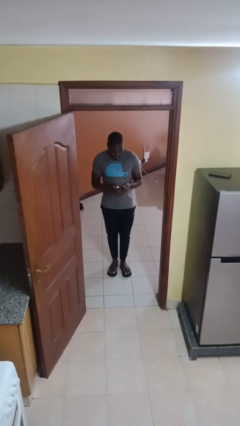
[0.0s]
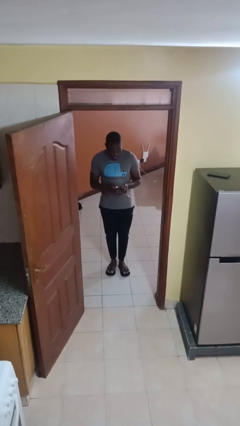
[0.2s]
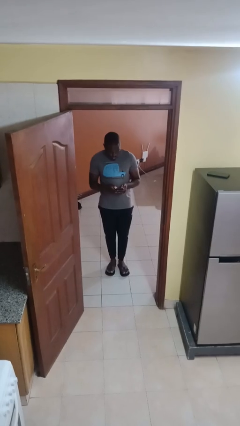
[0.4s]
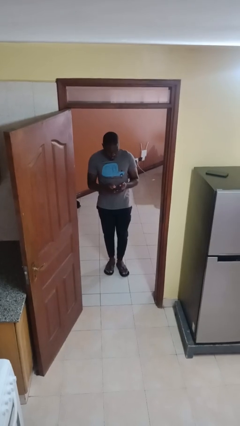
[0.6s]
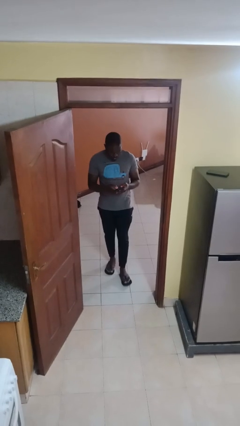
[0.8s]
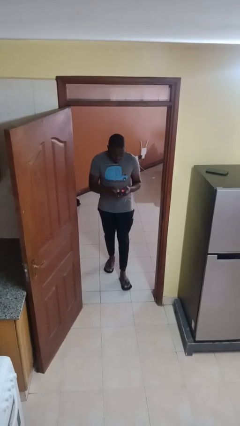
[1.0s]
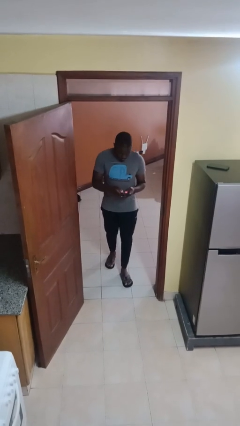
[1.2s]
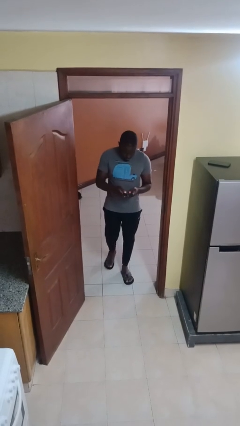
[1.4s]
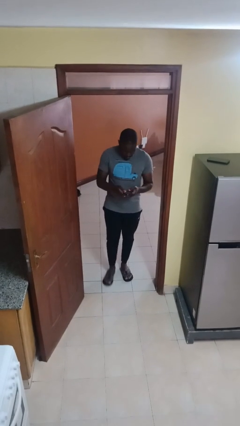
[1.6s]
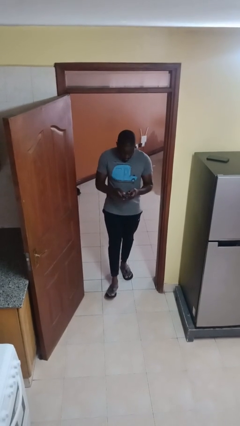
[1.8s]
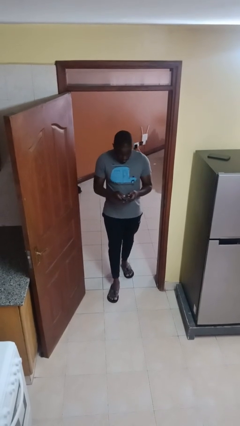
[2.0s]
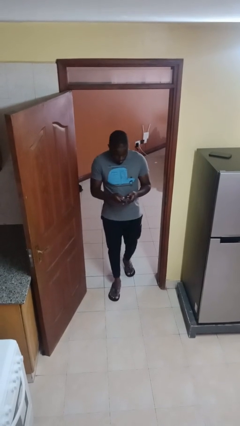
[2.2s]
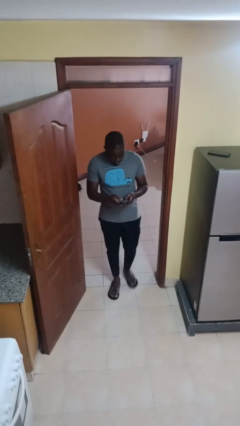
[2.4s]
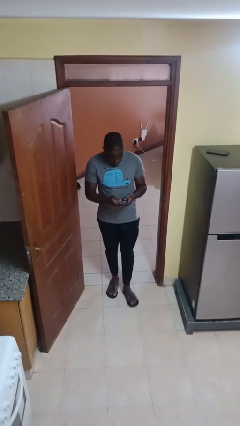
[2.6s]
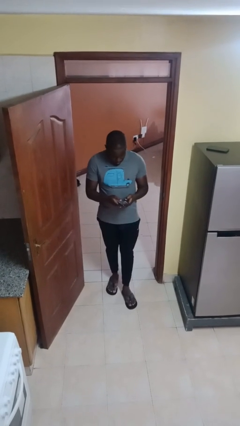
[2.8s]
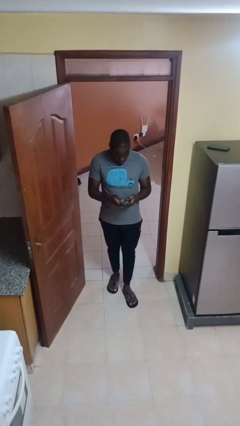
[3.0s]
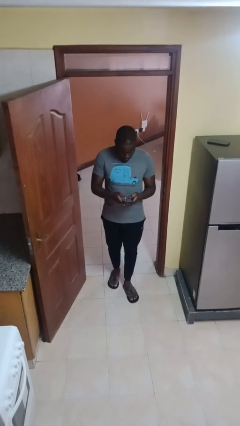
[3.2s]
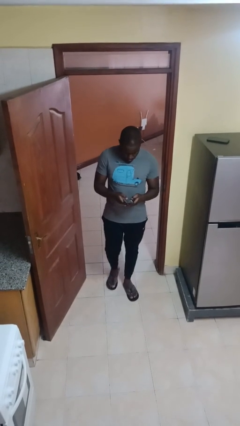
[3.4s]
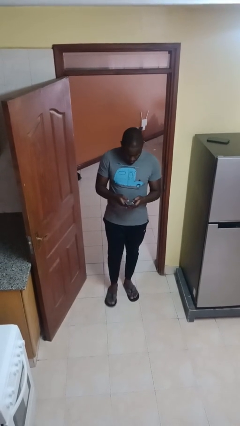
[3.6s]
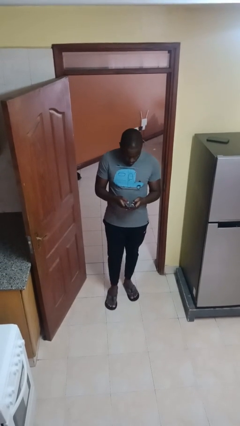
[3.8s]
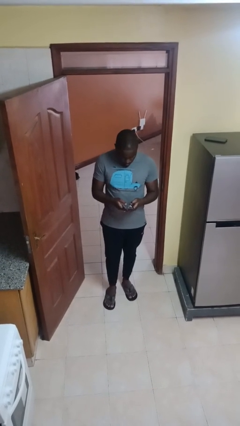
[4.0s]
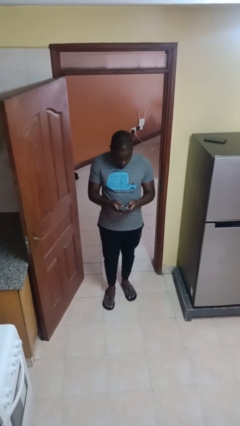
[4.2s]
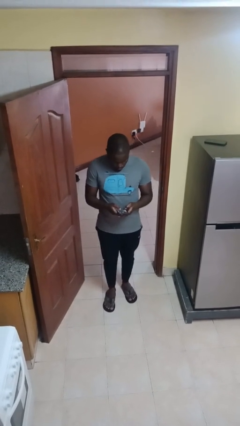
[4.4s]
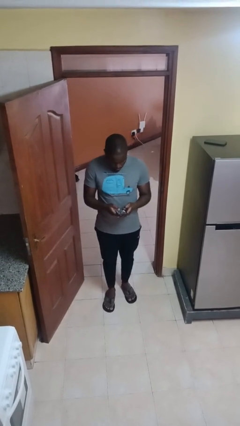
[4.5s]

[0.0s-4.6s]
person enters scene through structure

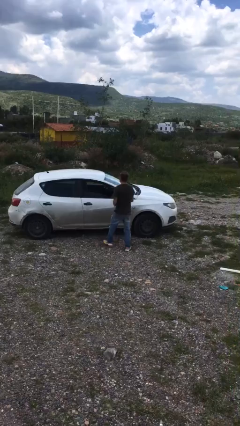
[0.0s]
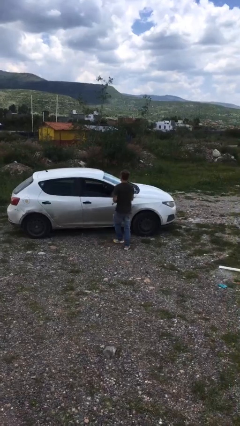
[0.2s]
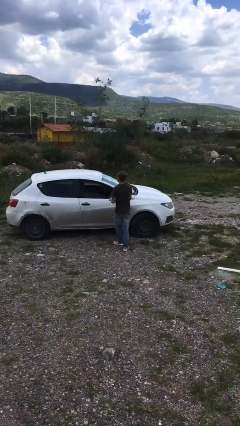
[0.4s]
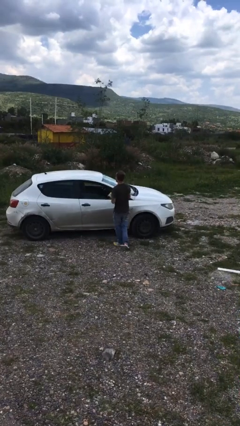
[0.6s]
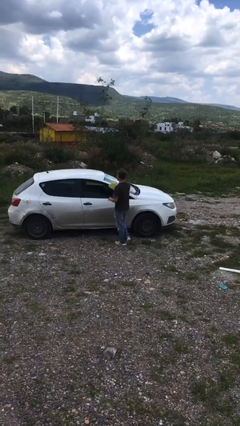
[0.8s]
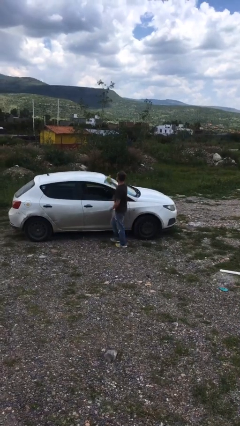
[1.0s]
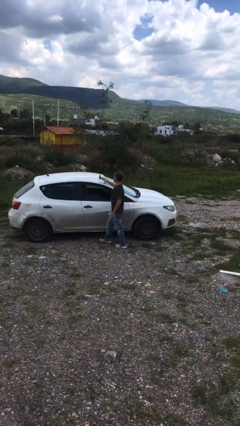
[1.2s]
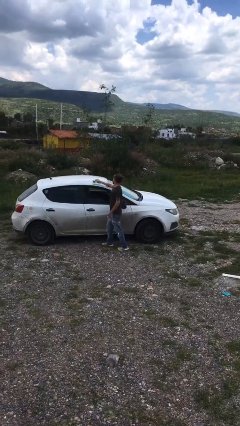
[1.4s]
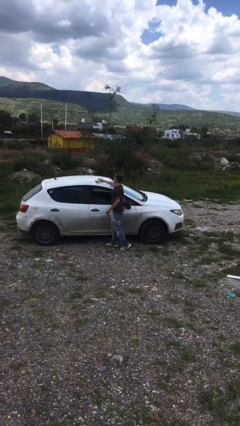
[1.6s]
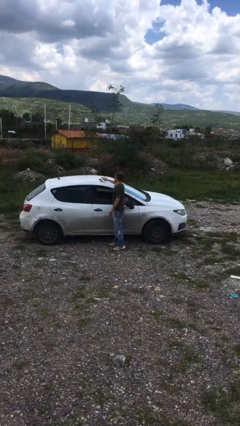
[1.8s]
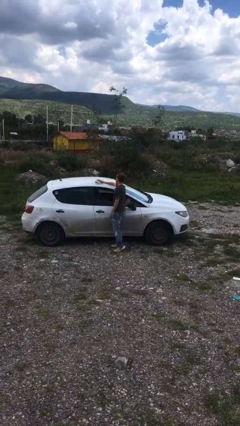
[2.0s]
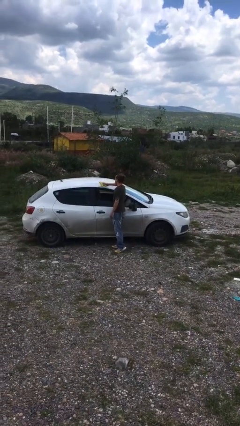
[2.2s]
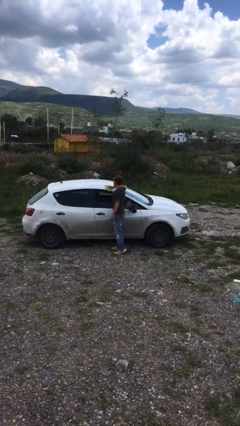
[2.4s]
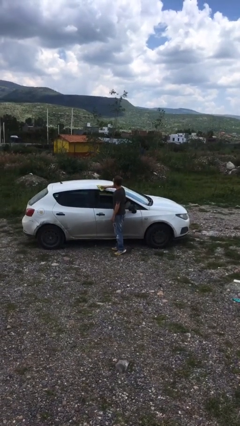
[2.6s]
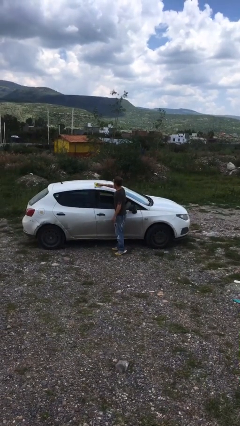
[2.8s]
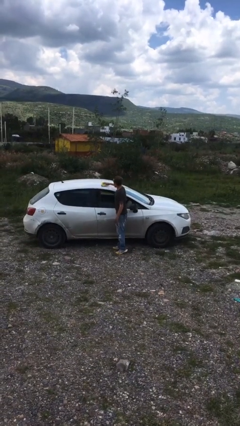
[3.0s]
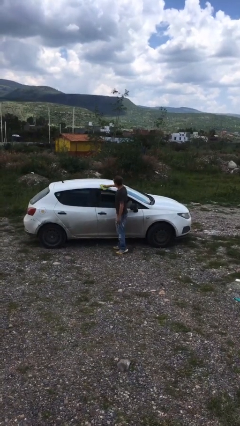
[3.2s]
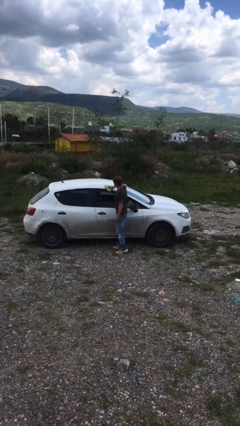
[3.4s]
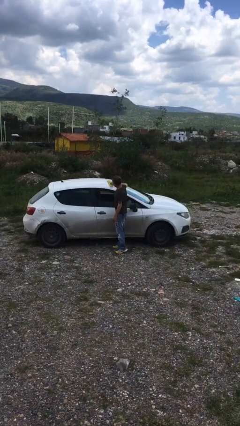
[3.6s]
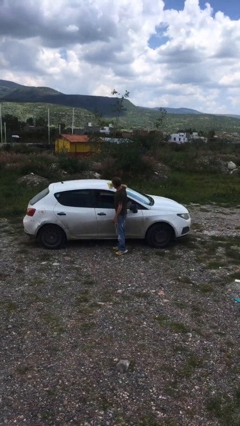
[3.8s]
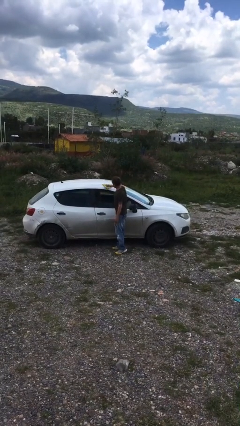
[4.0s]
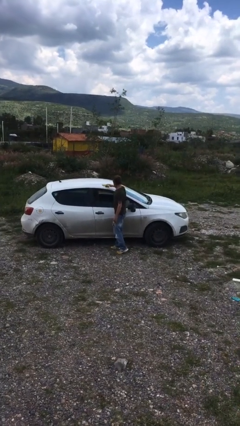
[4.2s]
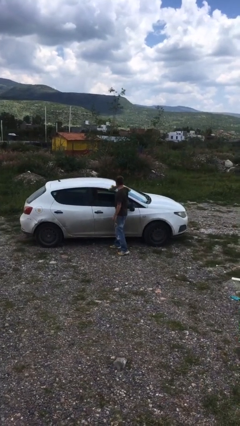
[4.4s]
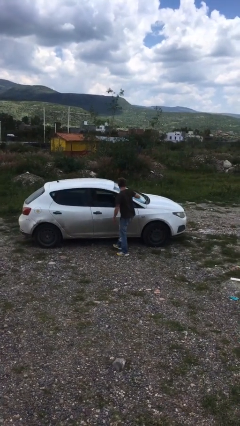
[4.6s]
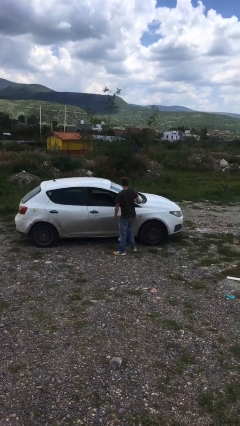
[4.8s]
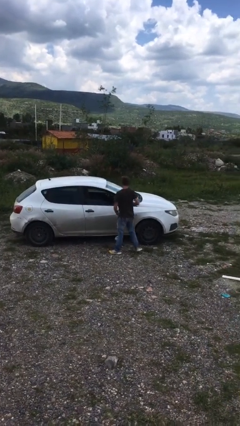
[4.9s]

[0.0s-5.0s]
person polishes car with rag

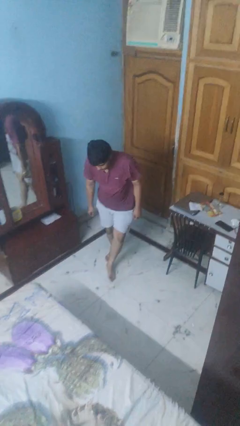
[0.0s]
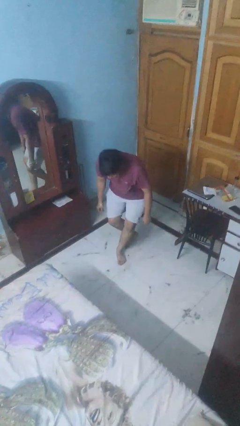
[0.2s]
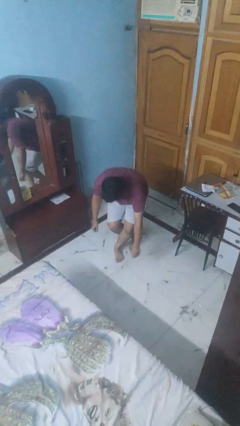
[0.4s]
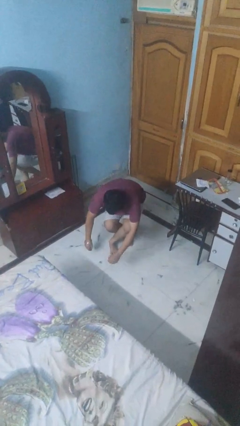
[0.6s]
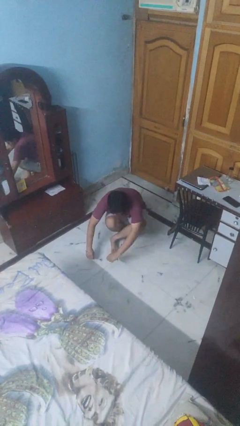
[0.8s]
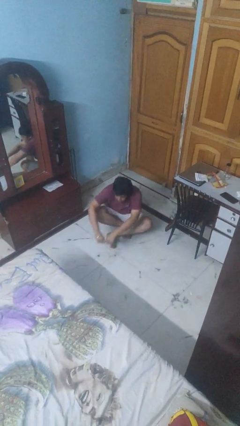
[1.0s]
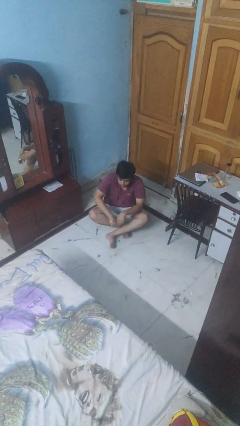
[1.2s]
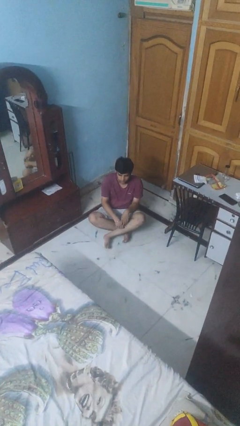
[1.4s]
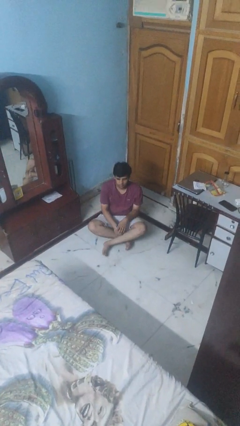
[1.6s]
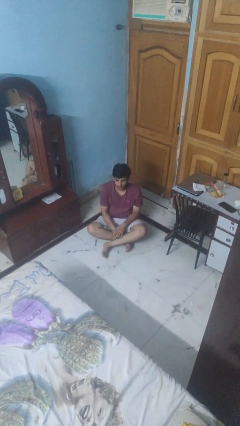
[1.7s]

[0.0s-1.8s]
person sits crisscross

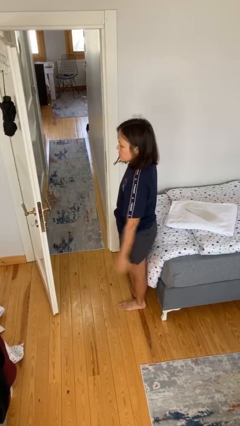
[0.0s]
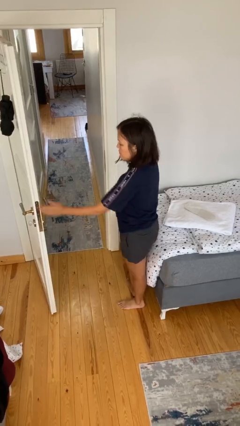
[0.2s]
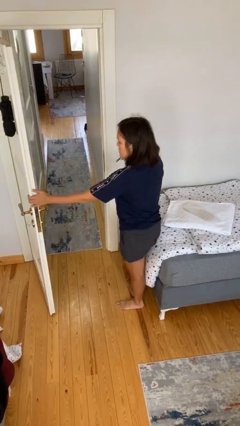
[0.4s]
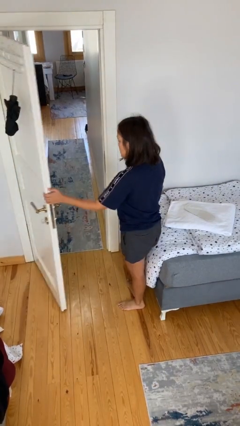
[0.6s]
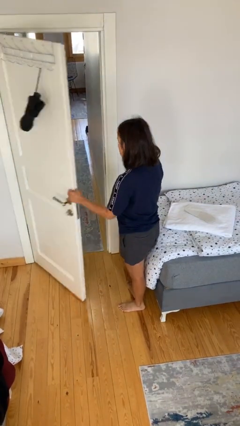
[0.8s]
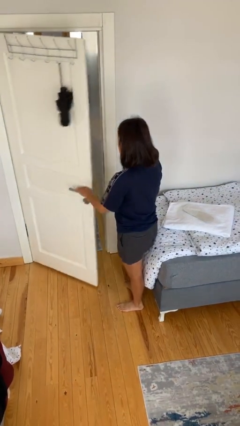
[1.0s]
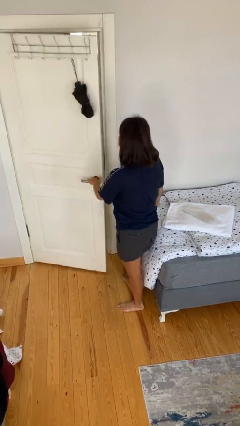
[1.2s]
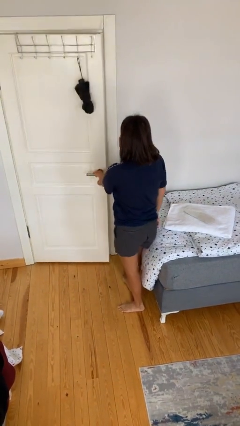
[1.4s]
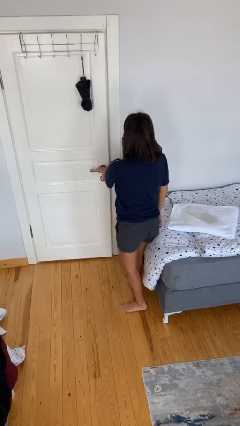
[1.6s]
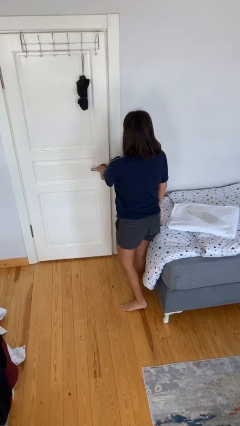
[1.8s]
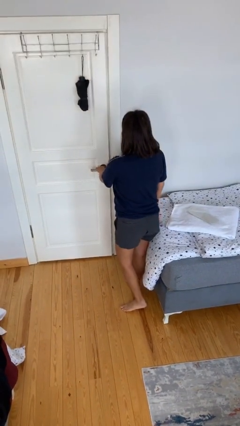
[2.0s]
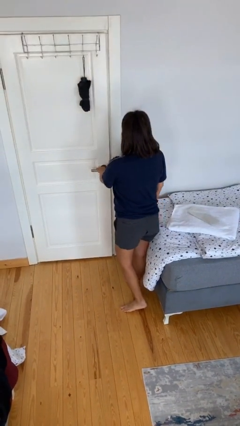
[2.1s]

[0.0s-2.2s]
person closes facility door

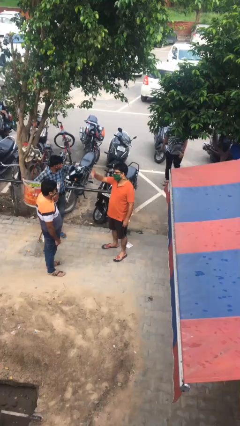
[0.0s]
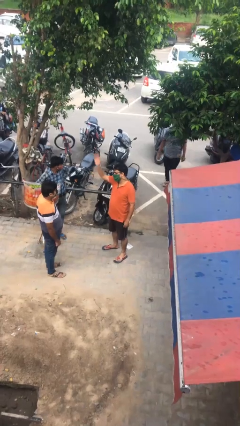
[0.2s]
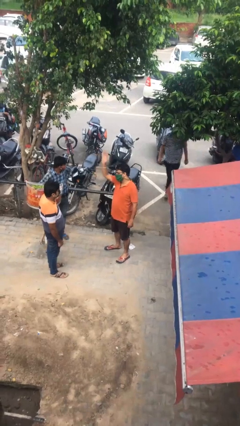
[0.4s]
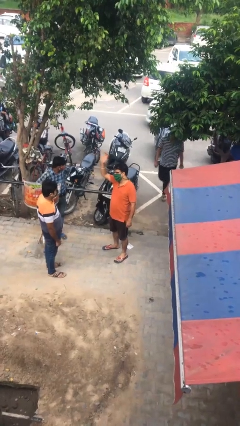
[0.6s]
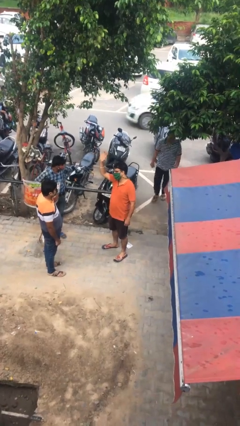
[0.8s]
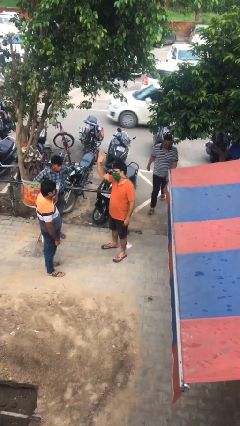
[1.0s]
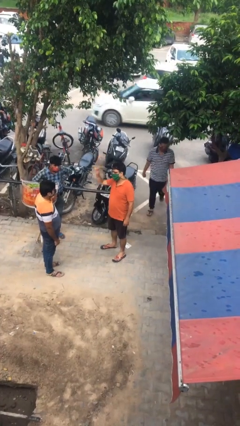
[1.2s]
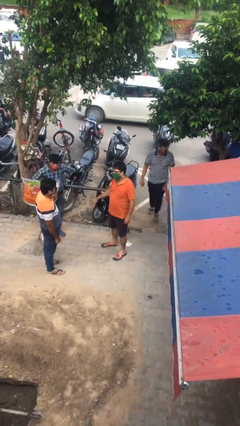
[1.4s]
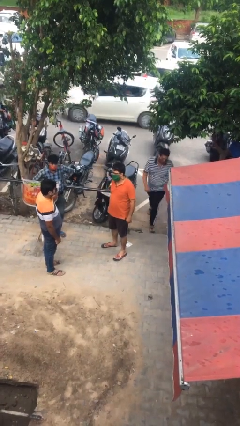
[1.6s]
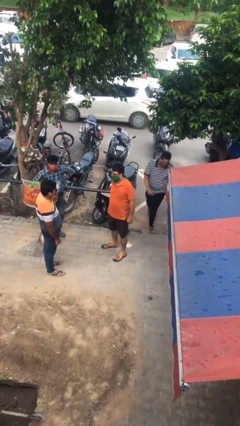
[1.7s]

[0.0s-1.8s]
person waves at person

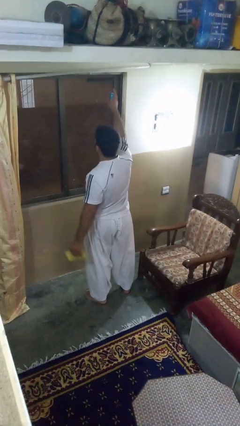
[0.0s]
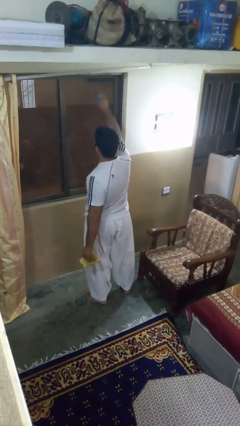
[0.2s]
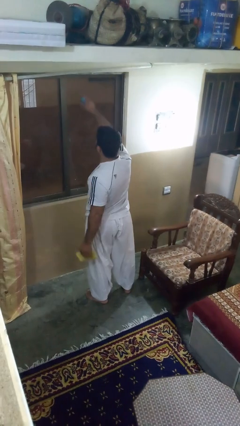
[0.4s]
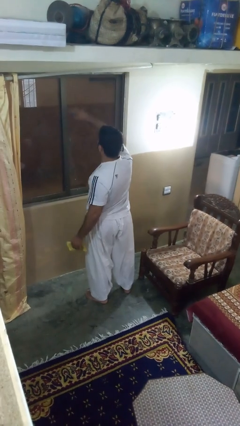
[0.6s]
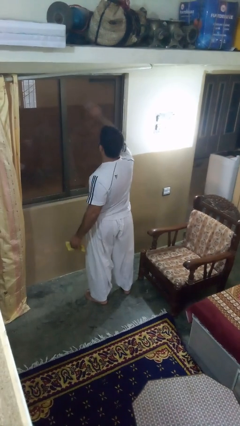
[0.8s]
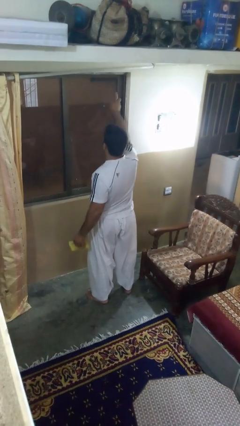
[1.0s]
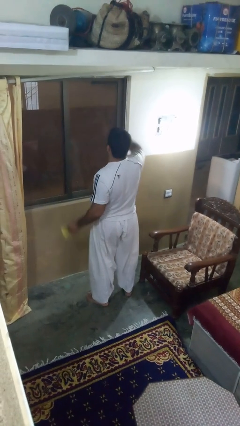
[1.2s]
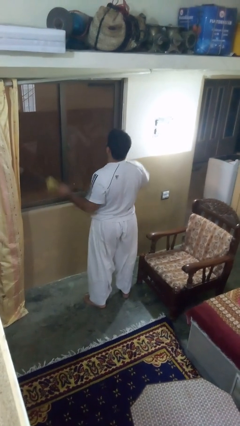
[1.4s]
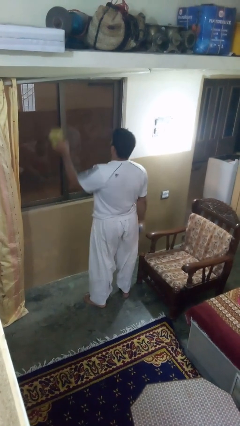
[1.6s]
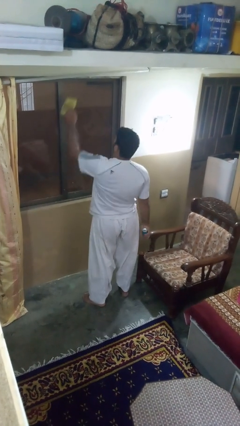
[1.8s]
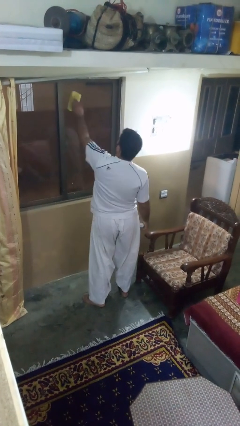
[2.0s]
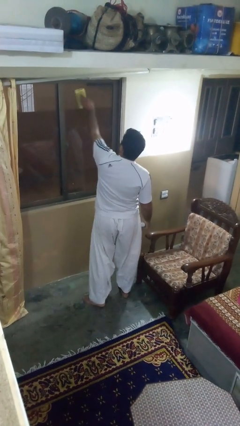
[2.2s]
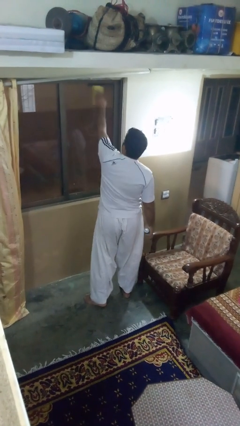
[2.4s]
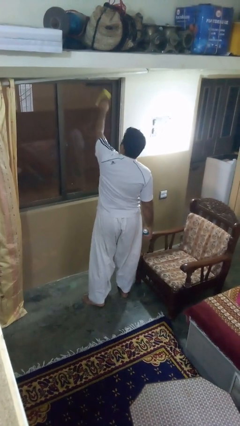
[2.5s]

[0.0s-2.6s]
person sprays from bottle
